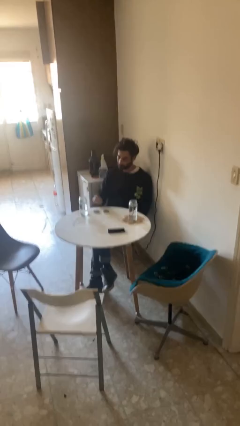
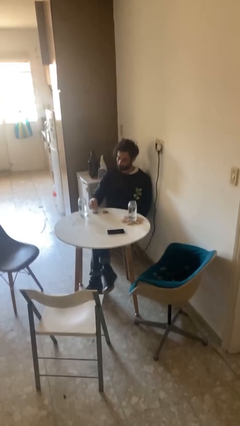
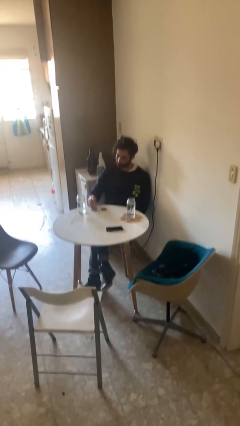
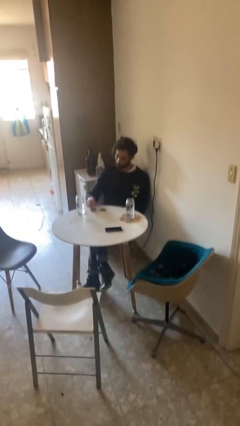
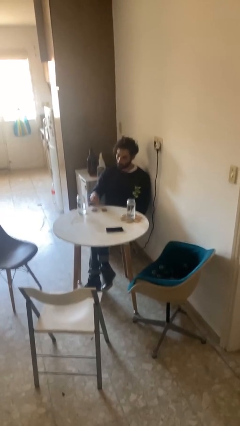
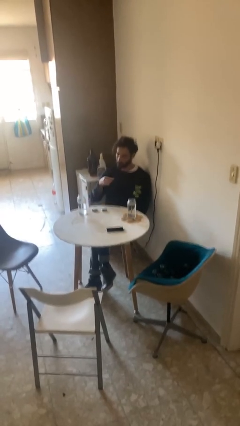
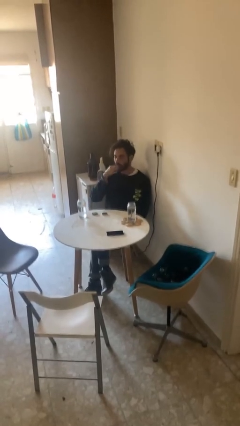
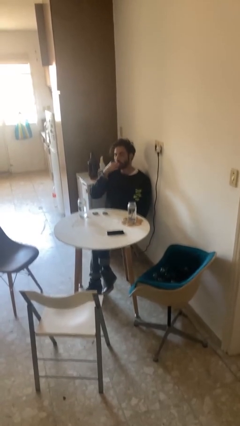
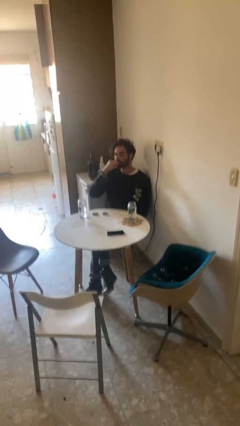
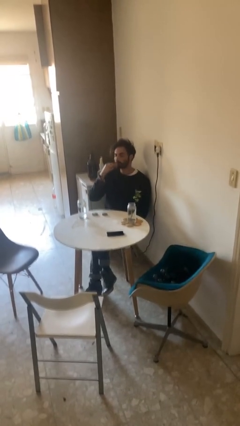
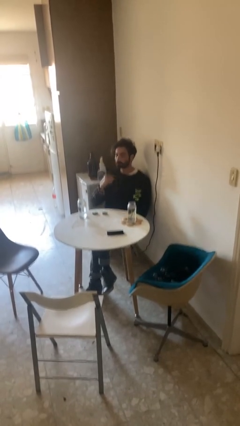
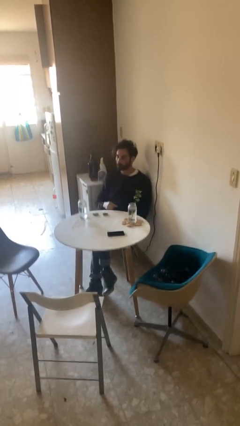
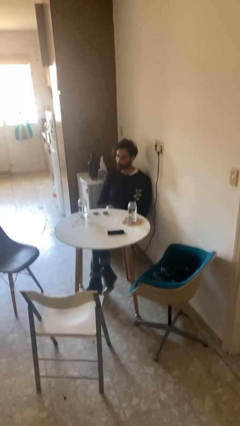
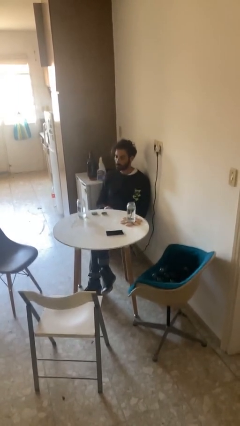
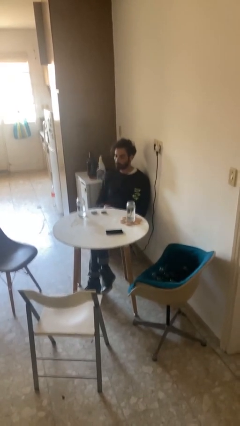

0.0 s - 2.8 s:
person takes medicine pills

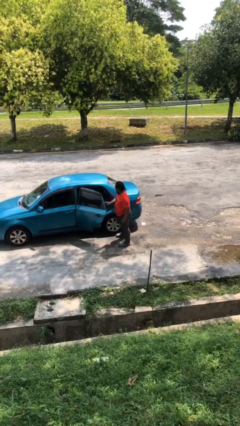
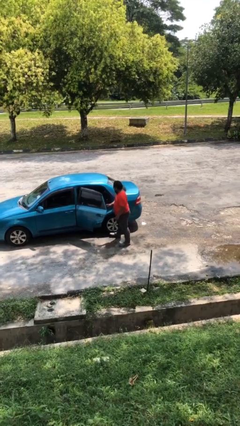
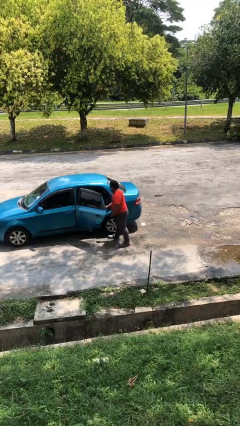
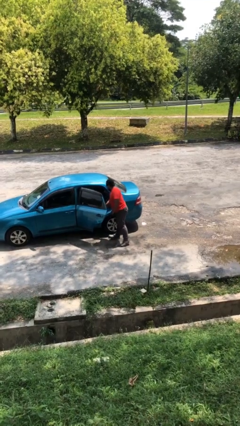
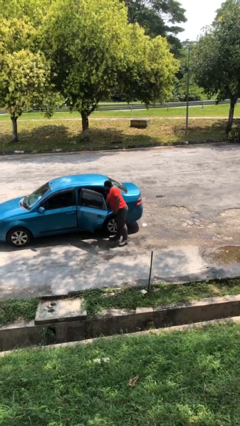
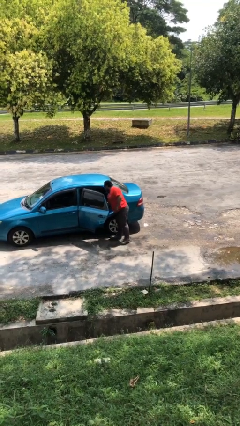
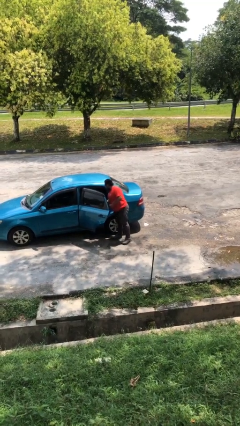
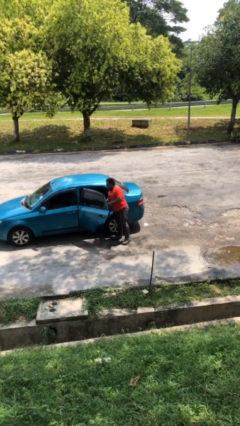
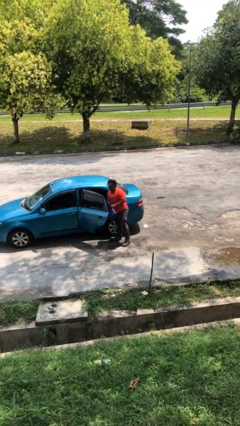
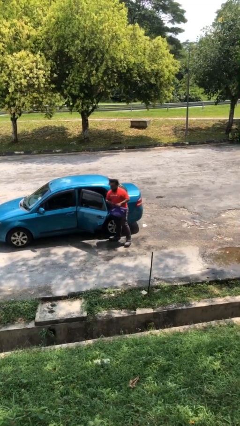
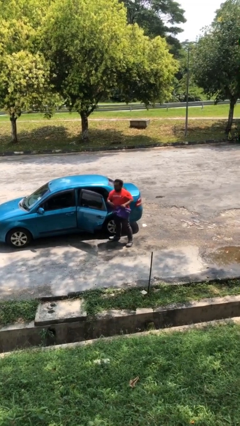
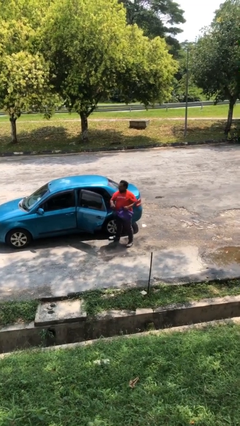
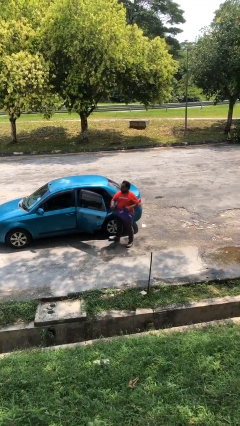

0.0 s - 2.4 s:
person unloads car

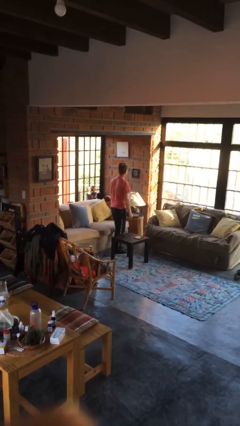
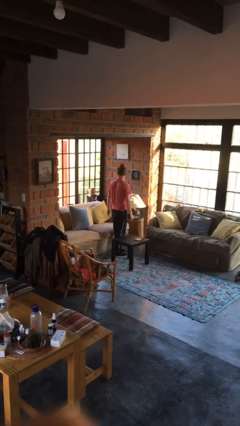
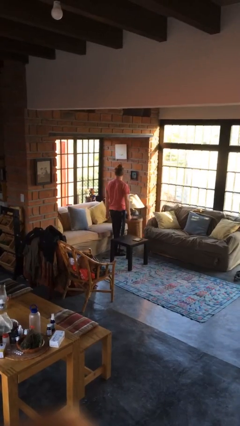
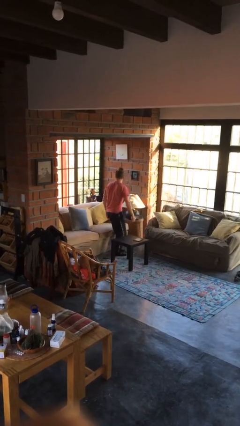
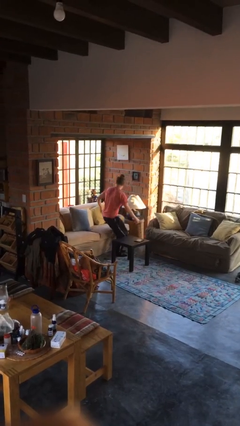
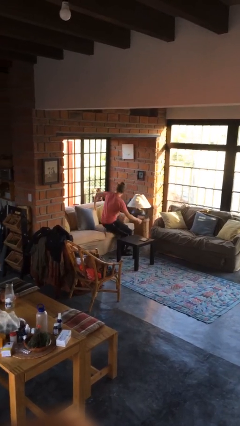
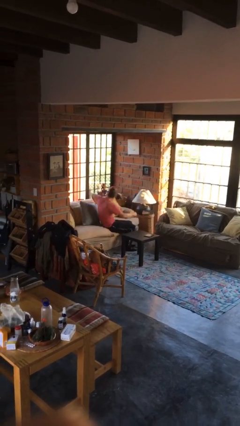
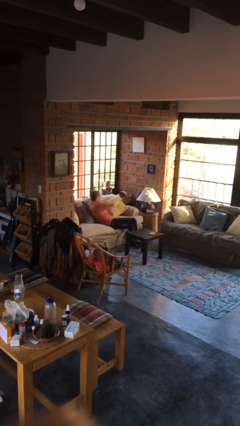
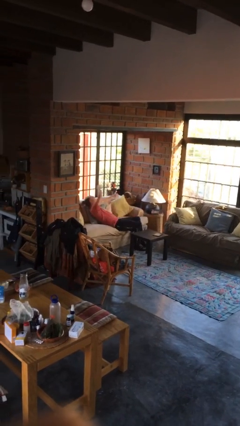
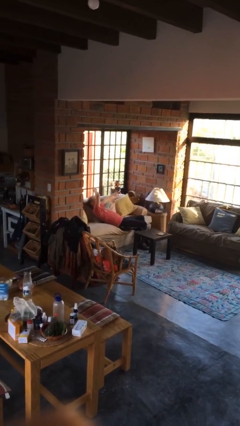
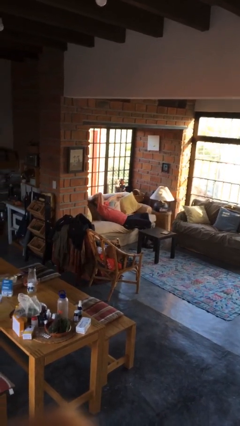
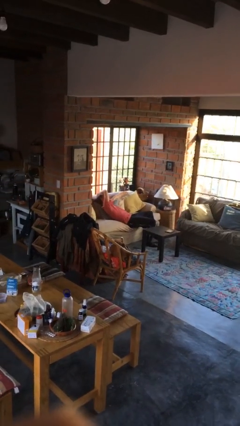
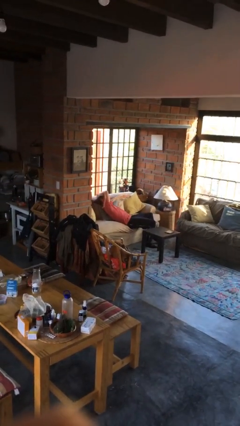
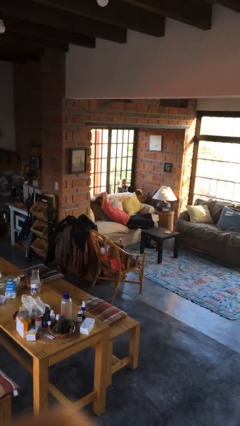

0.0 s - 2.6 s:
person lies down on couch

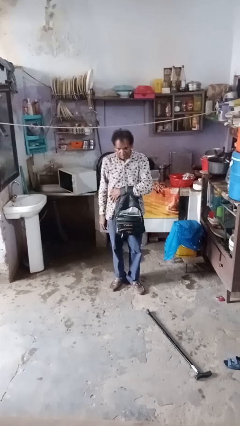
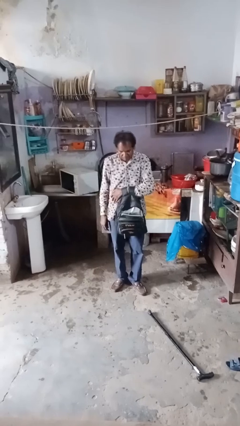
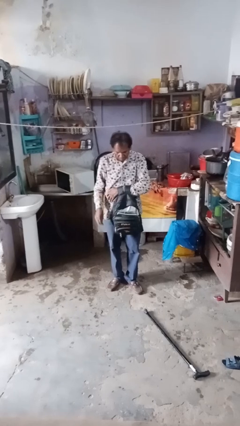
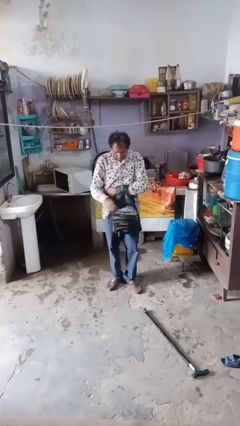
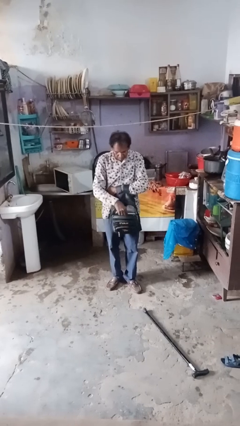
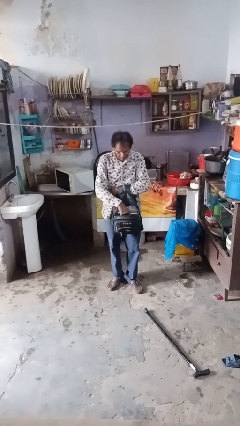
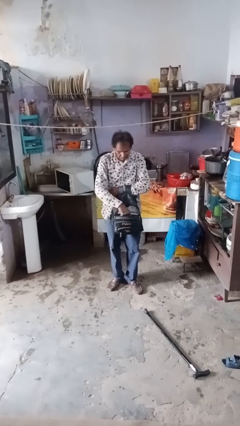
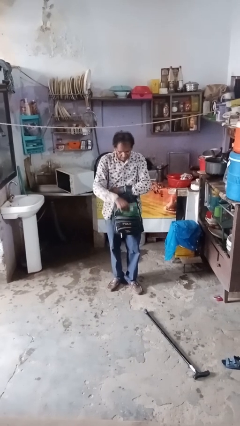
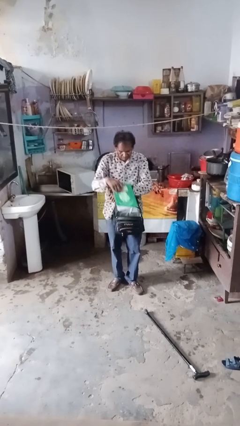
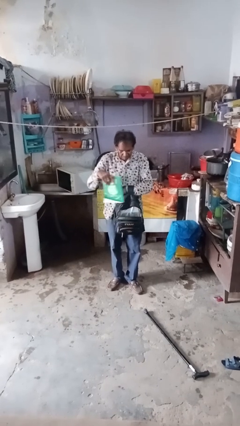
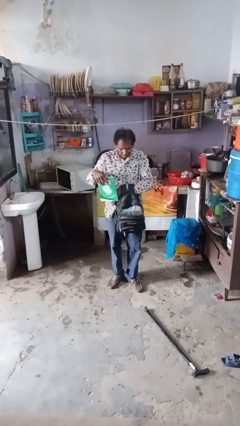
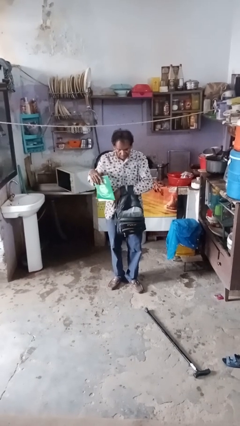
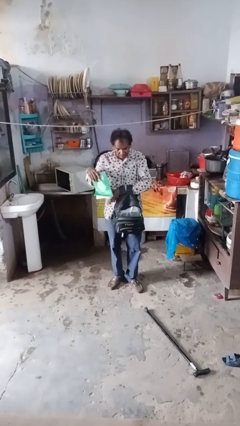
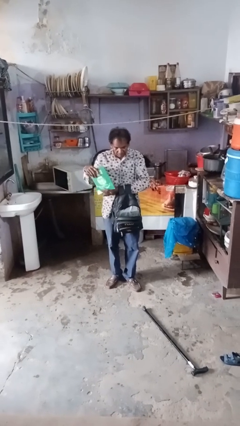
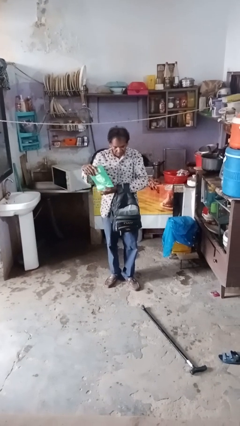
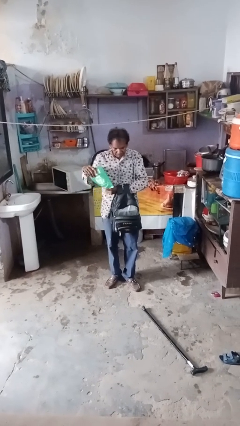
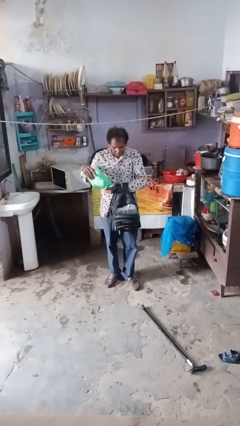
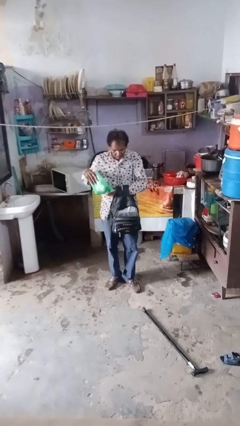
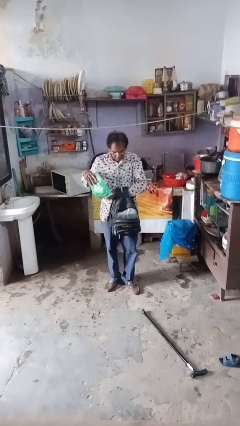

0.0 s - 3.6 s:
person takes object from bag

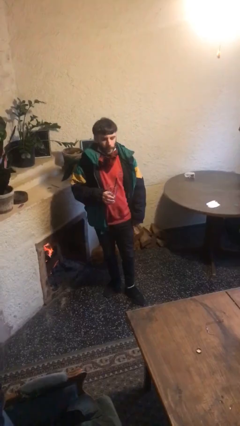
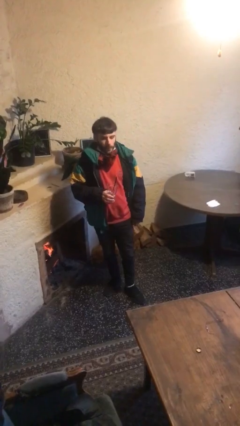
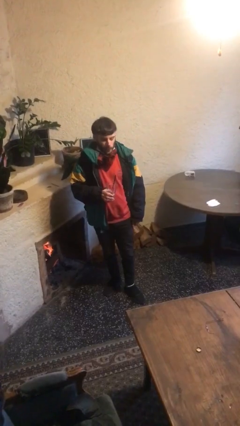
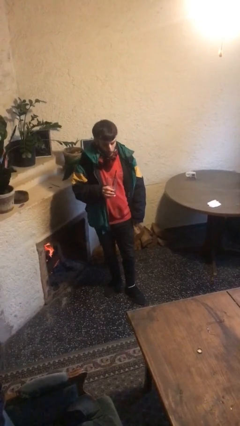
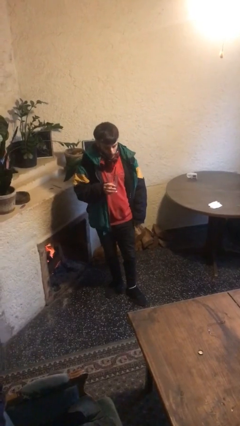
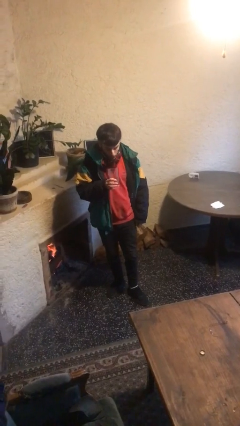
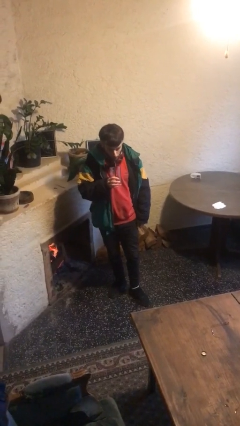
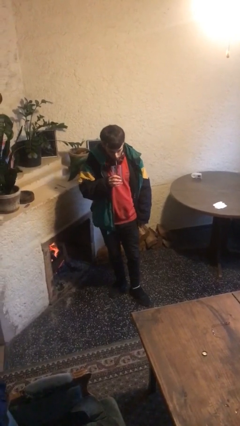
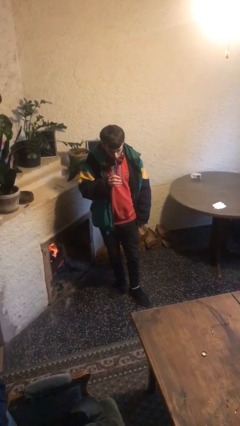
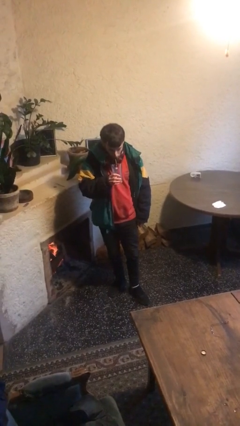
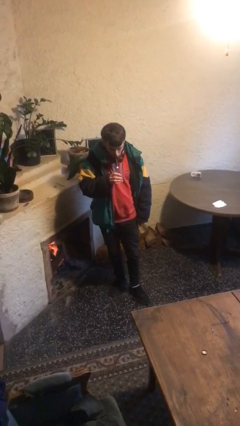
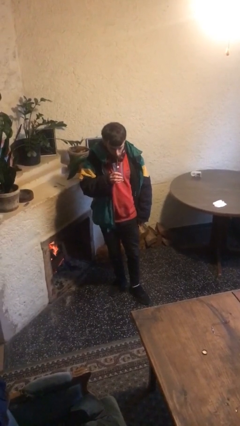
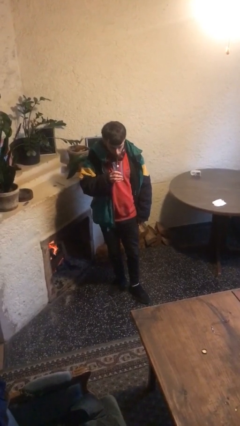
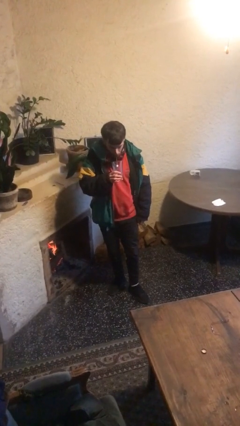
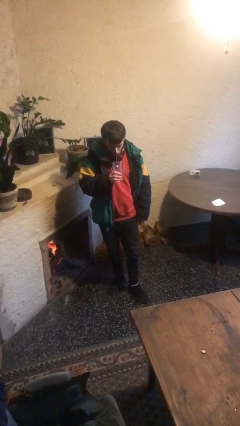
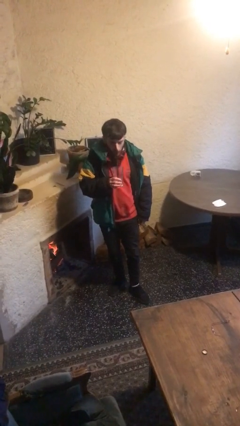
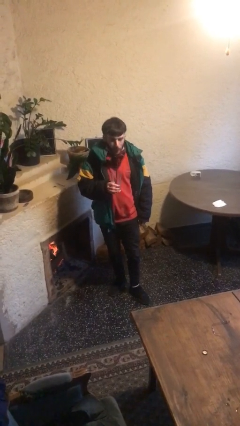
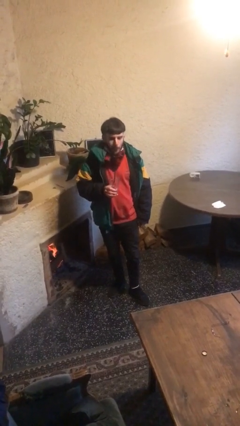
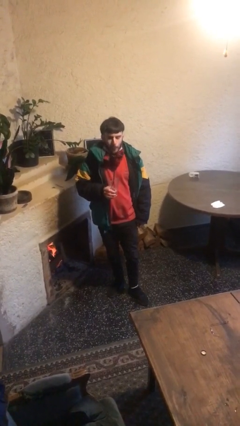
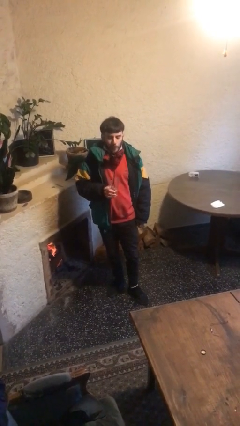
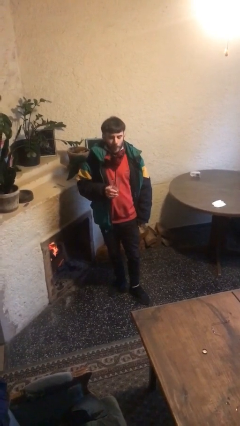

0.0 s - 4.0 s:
person drinks from straw

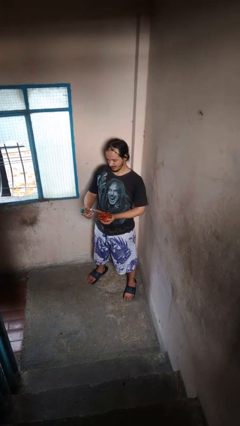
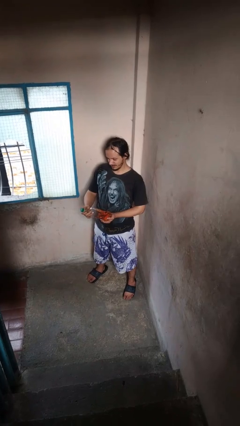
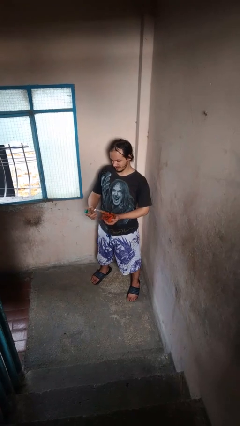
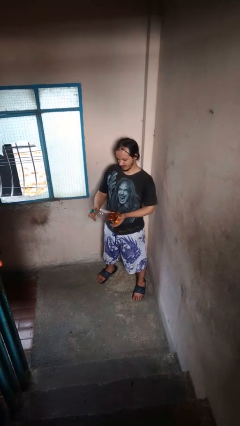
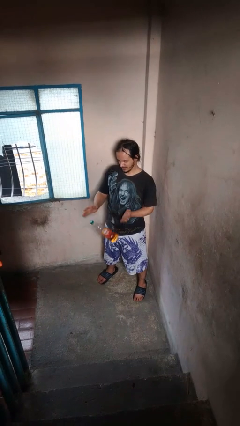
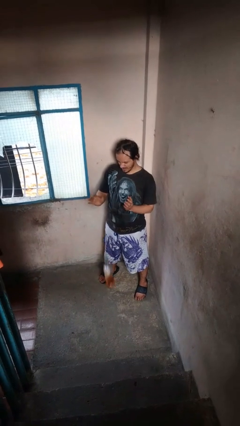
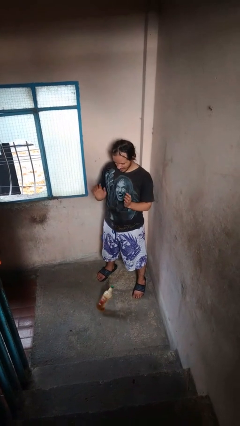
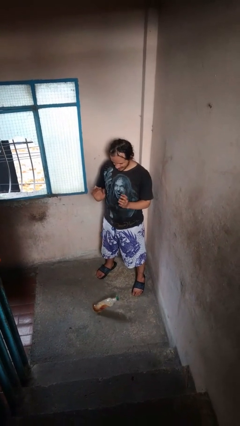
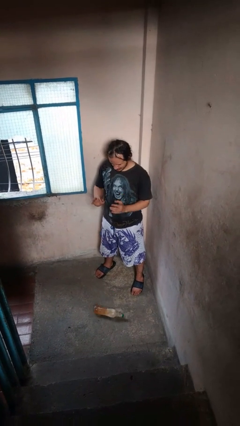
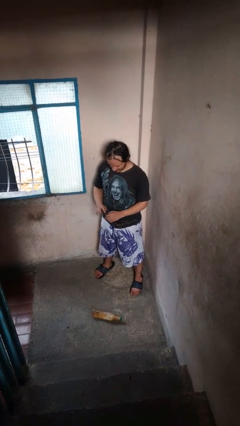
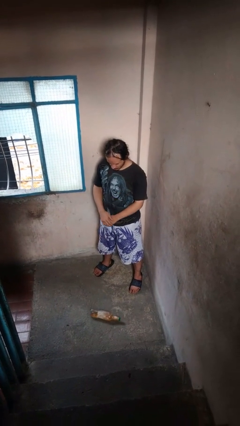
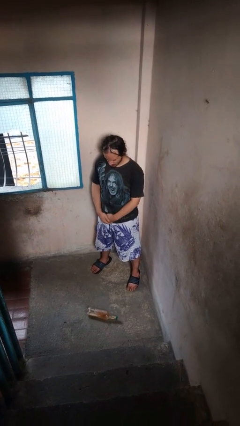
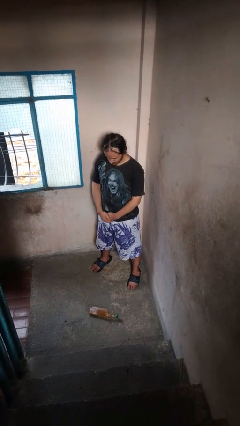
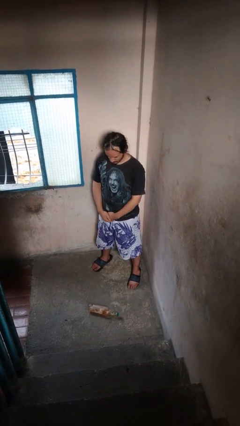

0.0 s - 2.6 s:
person drops object
